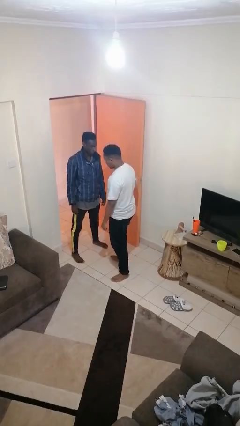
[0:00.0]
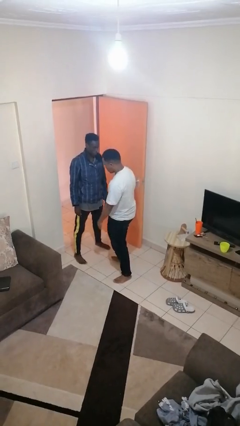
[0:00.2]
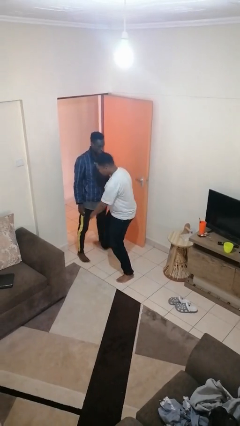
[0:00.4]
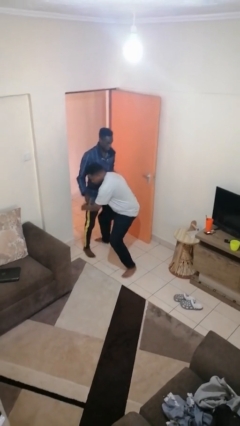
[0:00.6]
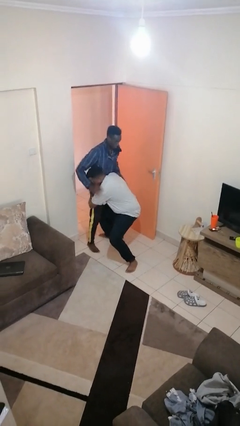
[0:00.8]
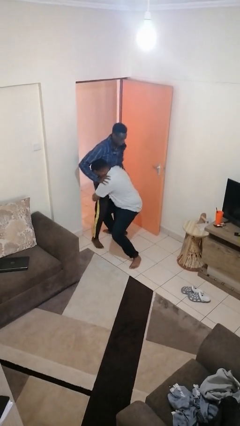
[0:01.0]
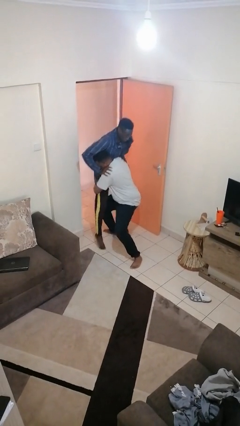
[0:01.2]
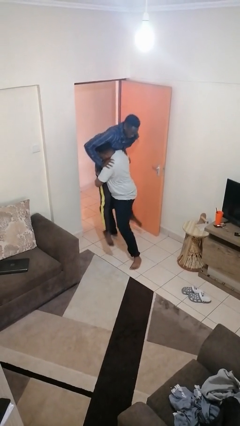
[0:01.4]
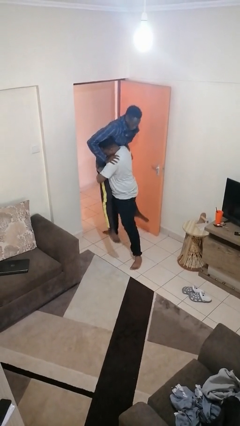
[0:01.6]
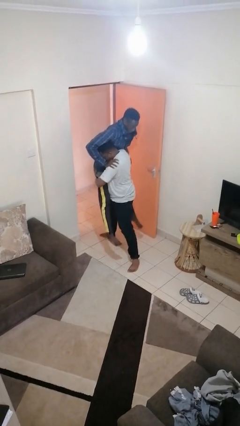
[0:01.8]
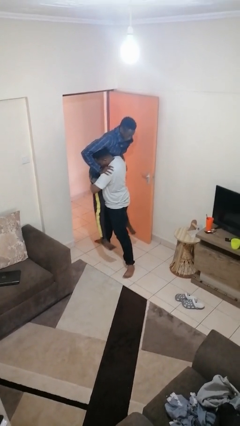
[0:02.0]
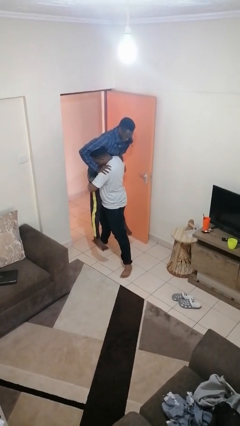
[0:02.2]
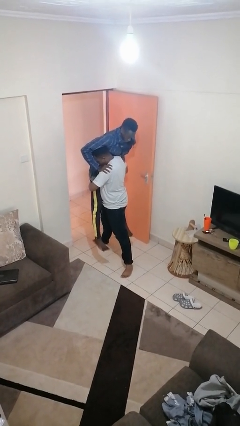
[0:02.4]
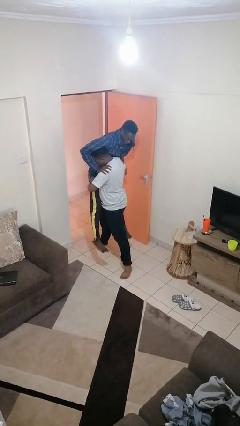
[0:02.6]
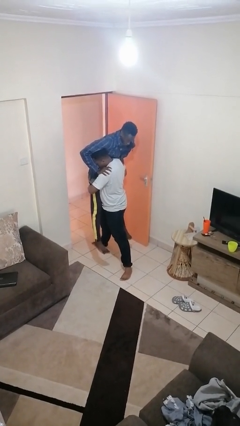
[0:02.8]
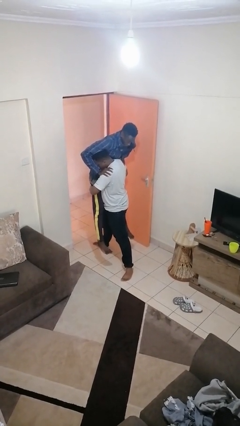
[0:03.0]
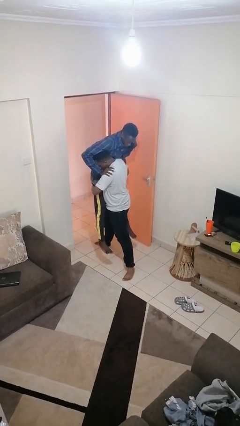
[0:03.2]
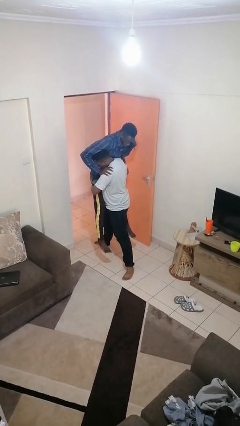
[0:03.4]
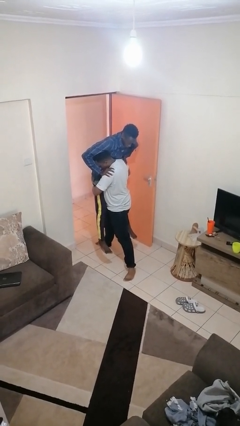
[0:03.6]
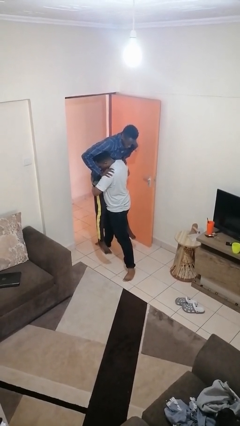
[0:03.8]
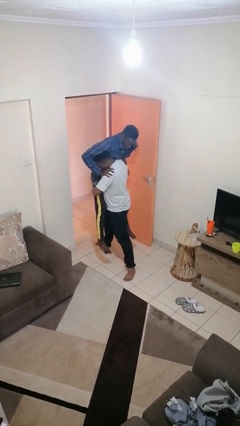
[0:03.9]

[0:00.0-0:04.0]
person picks up person

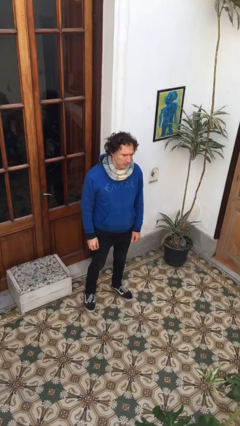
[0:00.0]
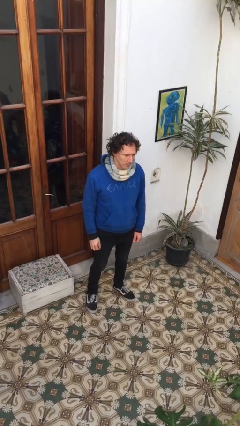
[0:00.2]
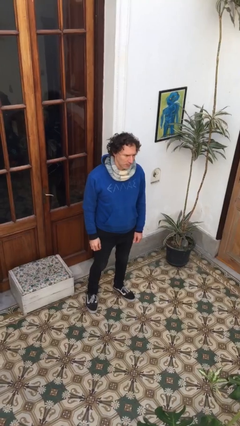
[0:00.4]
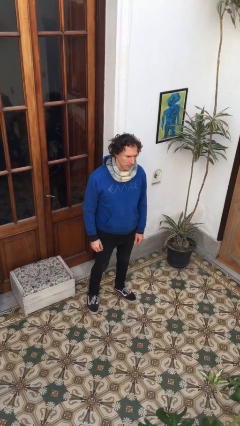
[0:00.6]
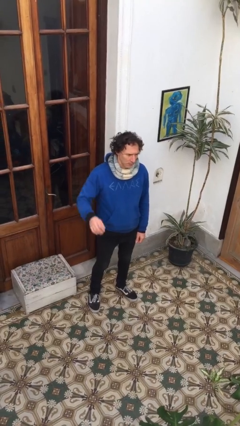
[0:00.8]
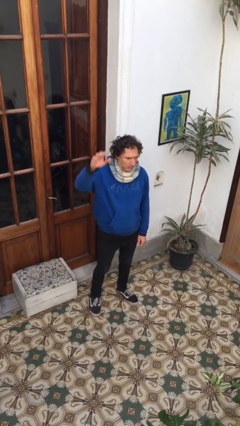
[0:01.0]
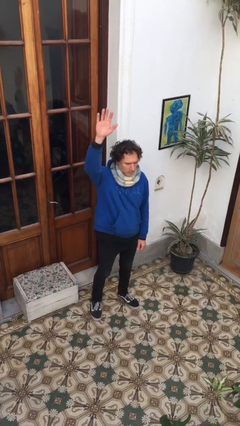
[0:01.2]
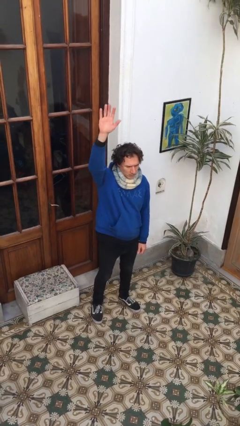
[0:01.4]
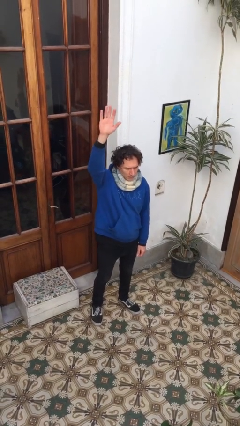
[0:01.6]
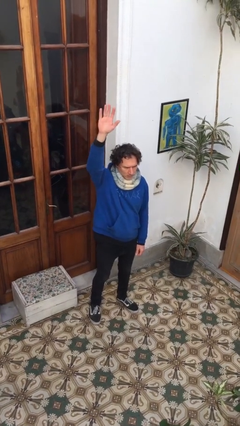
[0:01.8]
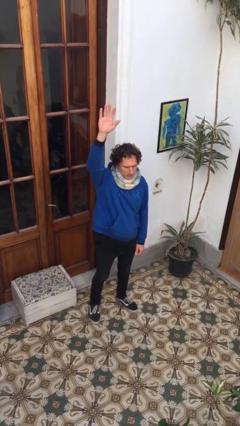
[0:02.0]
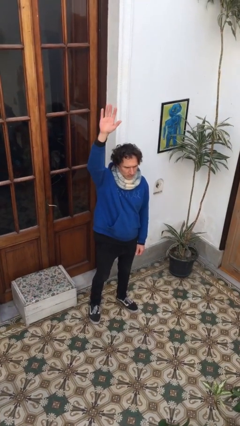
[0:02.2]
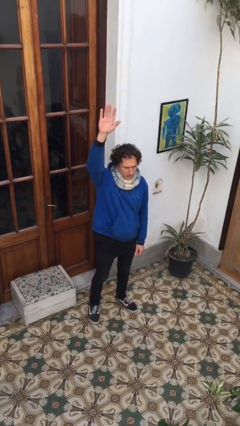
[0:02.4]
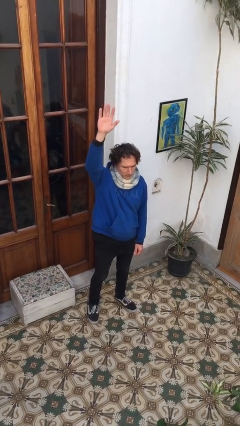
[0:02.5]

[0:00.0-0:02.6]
person gestures raise hand

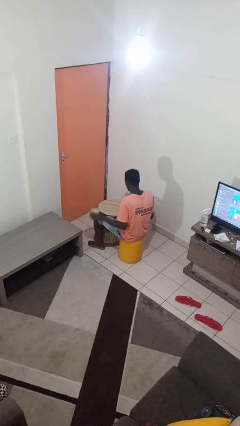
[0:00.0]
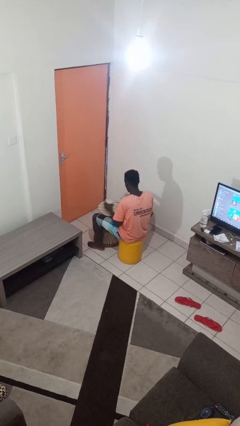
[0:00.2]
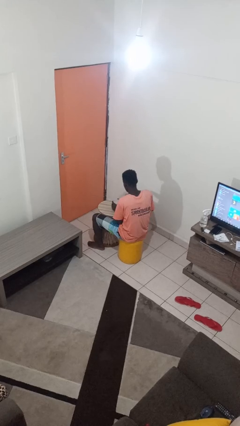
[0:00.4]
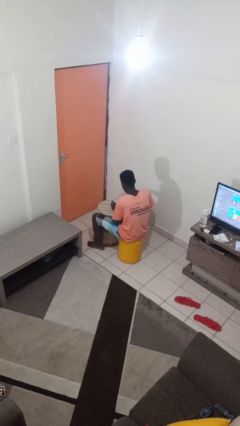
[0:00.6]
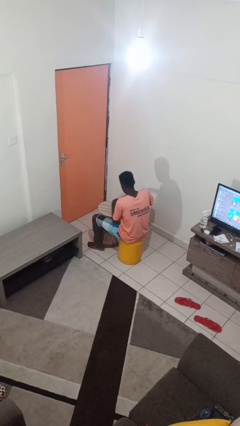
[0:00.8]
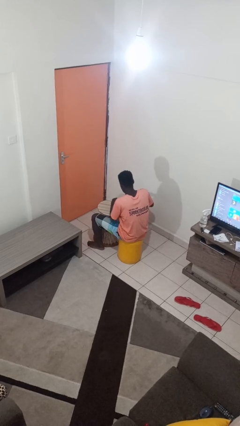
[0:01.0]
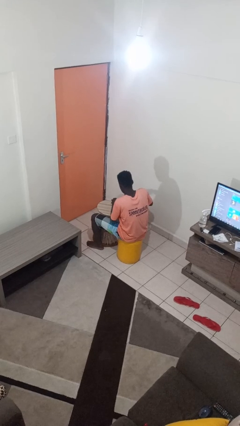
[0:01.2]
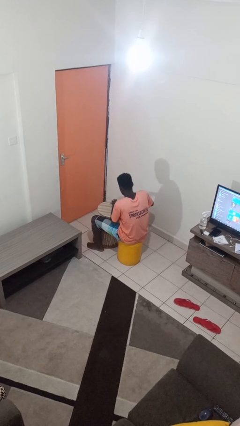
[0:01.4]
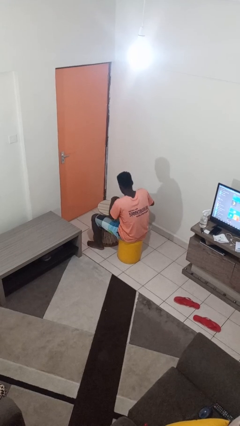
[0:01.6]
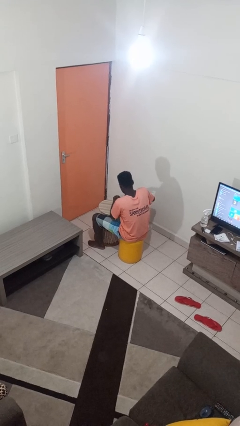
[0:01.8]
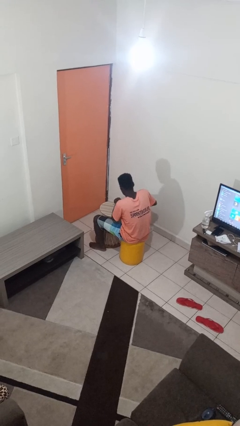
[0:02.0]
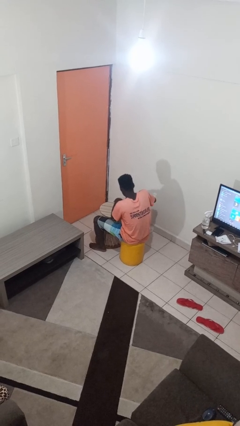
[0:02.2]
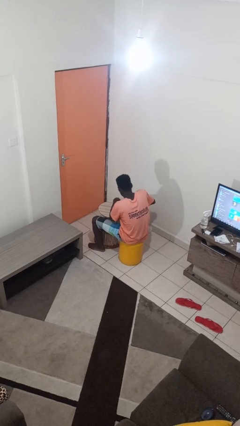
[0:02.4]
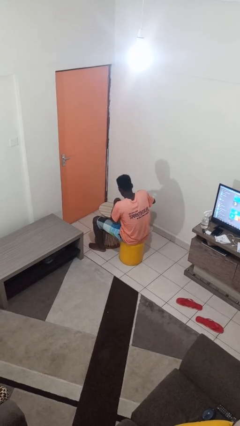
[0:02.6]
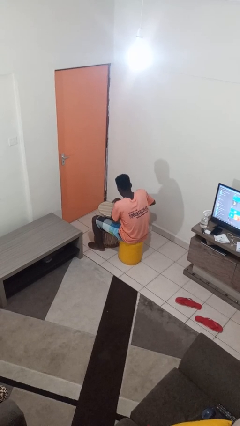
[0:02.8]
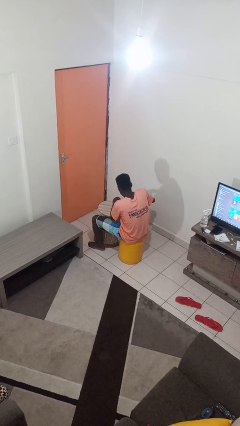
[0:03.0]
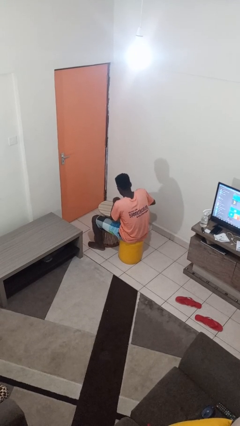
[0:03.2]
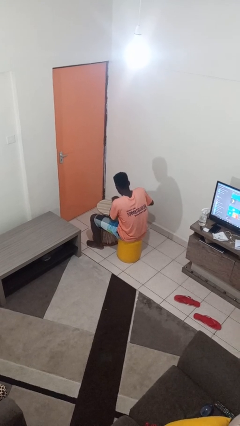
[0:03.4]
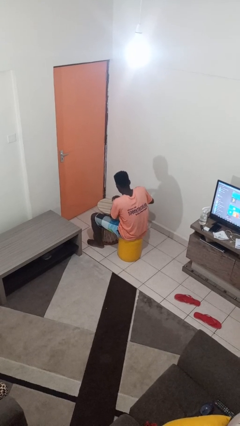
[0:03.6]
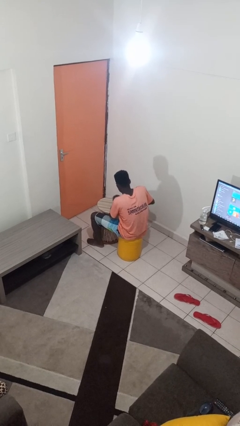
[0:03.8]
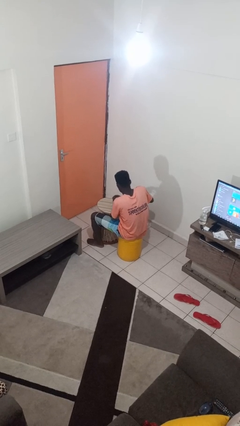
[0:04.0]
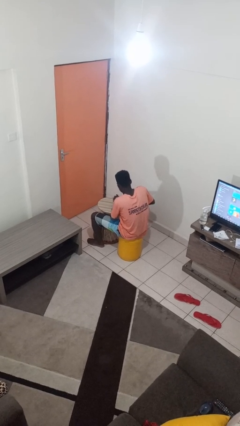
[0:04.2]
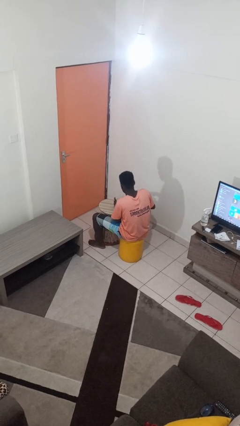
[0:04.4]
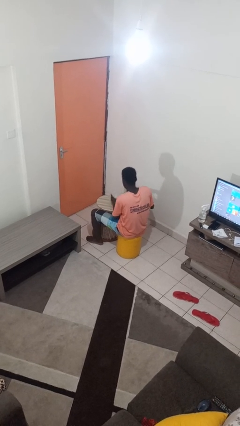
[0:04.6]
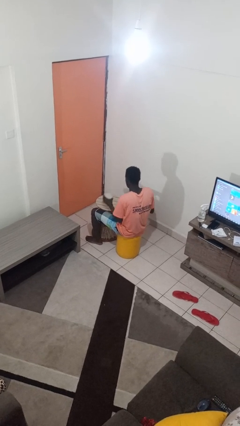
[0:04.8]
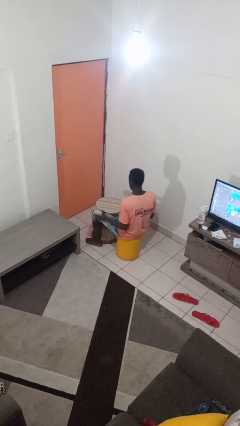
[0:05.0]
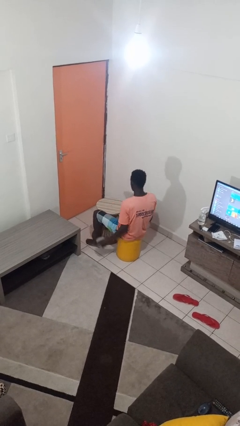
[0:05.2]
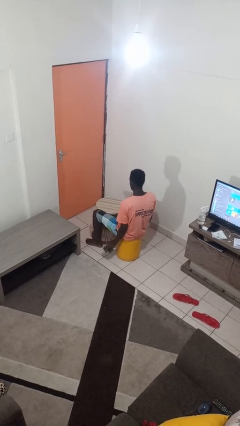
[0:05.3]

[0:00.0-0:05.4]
person opens can with can opener

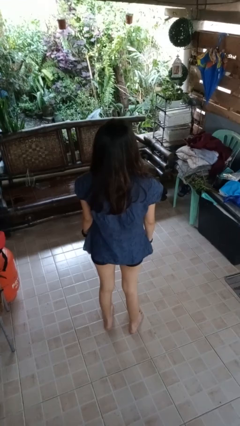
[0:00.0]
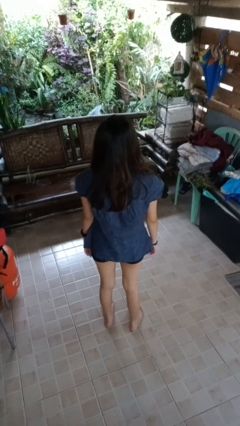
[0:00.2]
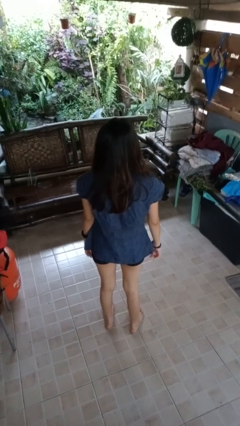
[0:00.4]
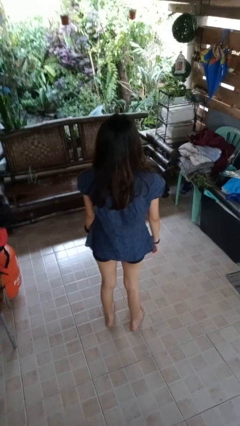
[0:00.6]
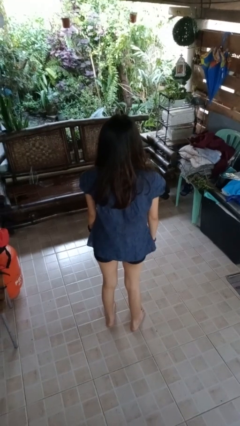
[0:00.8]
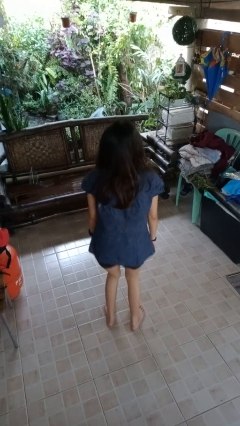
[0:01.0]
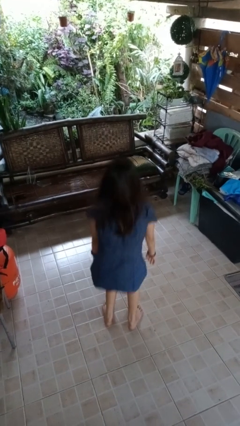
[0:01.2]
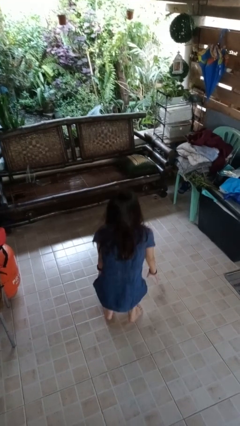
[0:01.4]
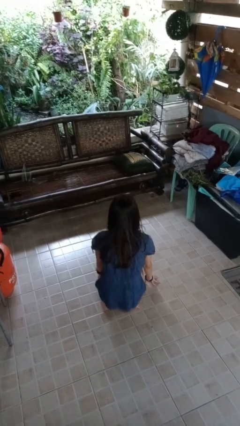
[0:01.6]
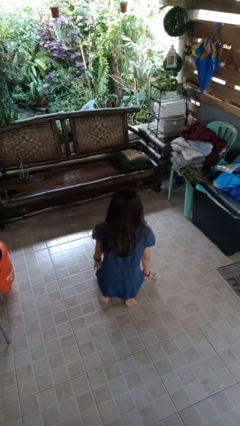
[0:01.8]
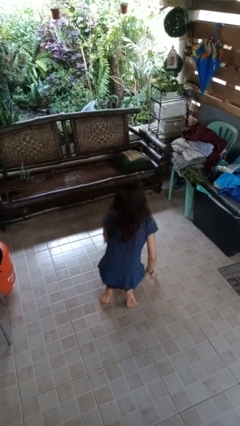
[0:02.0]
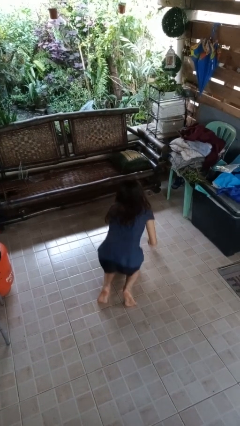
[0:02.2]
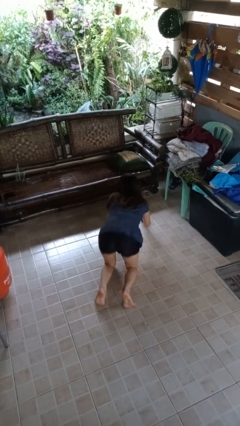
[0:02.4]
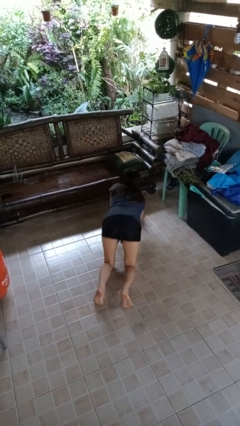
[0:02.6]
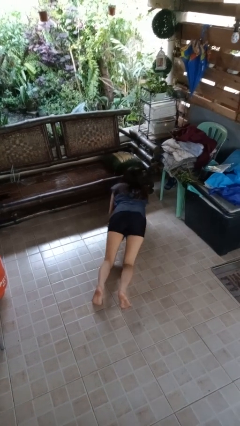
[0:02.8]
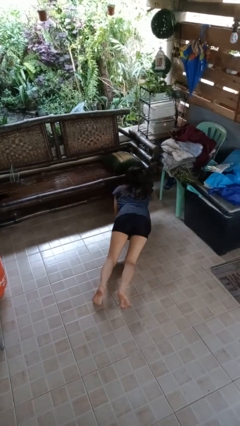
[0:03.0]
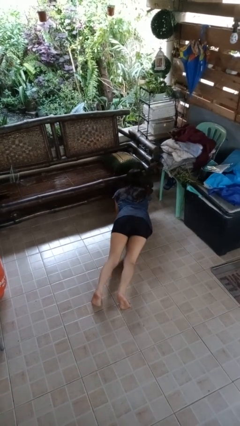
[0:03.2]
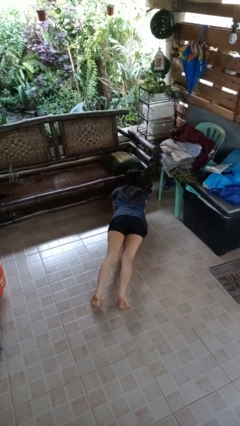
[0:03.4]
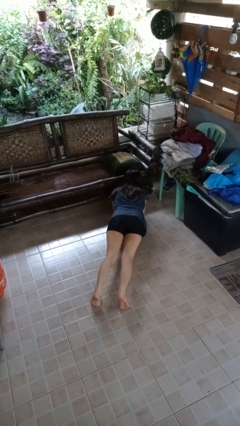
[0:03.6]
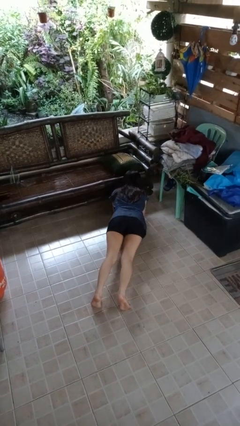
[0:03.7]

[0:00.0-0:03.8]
person exercises with plank

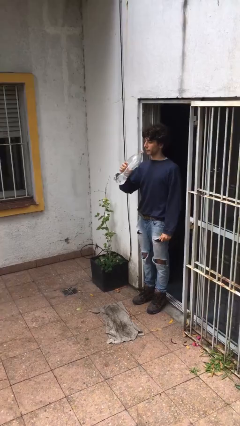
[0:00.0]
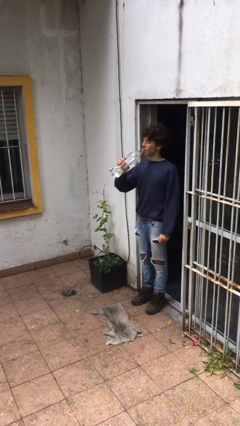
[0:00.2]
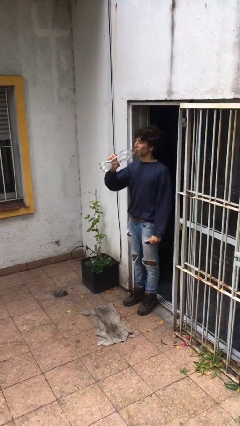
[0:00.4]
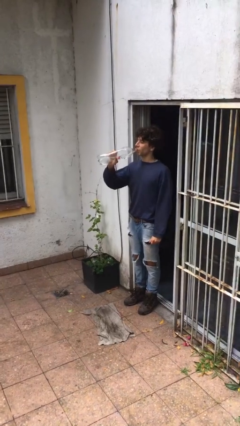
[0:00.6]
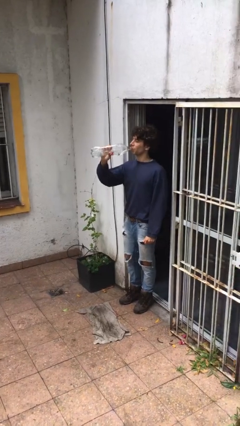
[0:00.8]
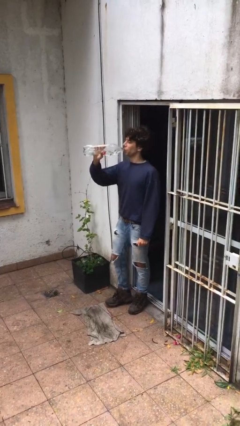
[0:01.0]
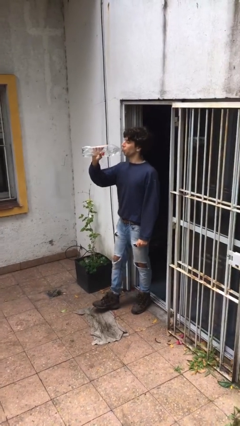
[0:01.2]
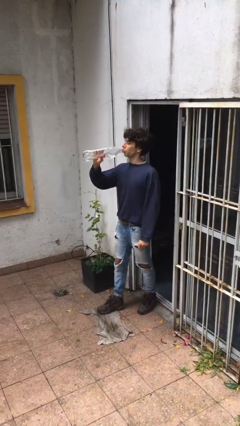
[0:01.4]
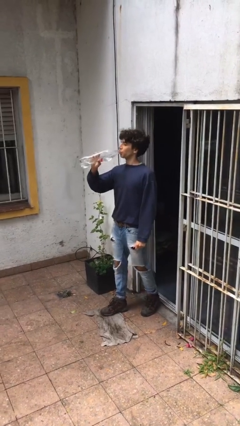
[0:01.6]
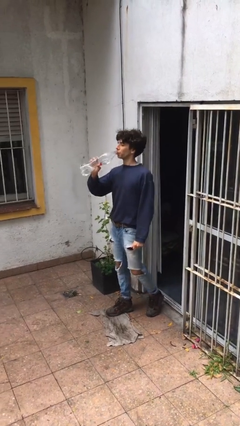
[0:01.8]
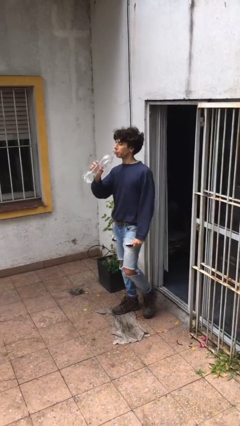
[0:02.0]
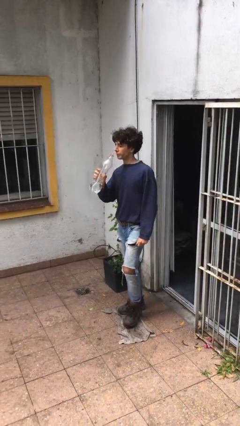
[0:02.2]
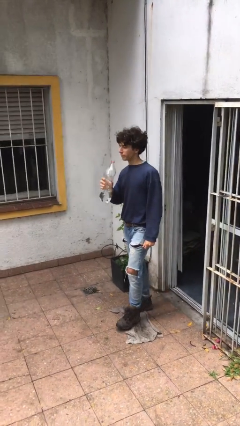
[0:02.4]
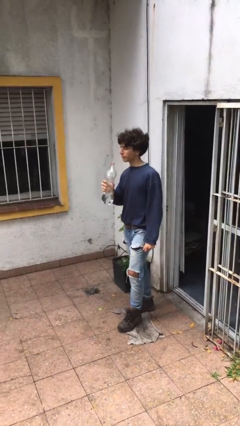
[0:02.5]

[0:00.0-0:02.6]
person drinks from bottle
